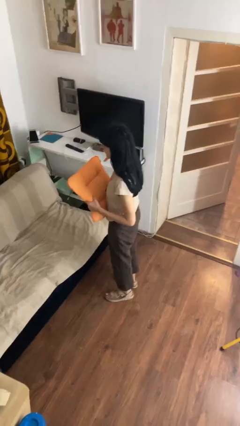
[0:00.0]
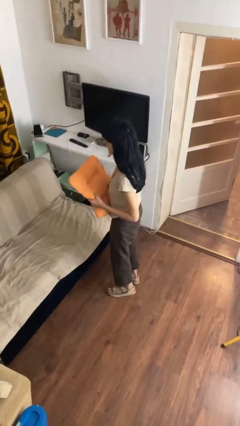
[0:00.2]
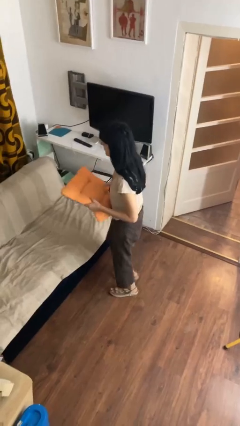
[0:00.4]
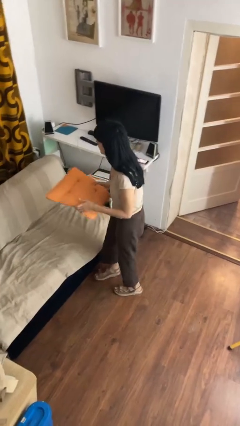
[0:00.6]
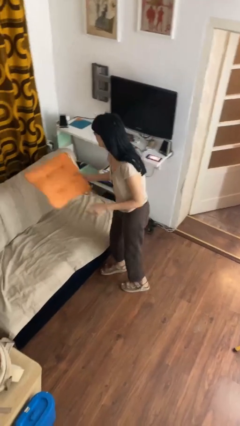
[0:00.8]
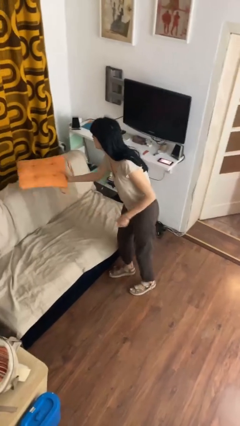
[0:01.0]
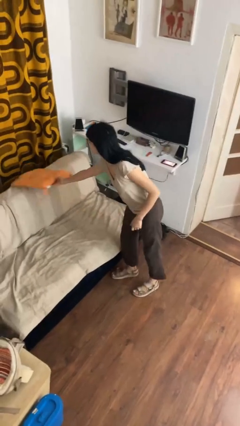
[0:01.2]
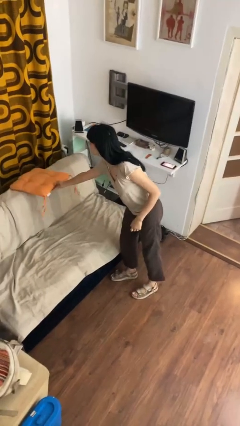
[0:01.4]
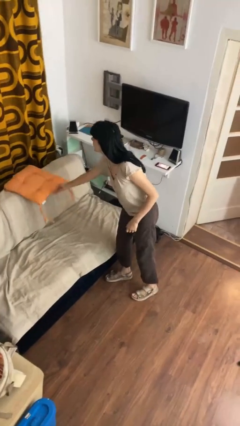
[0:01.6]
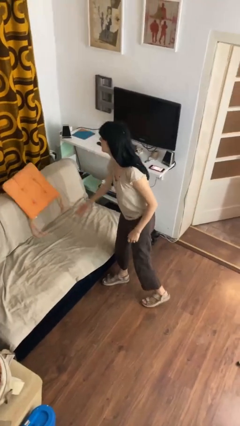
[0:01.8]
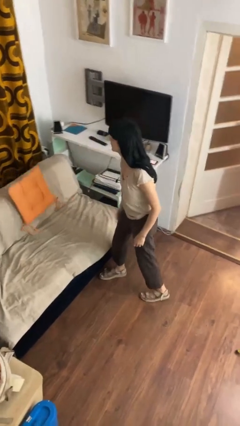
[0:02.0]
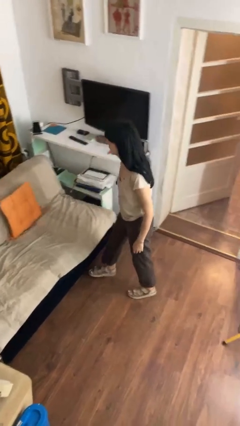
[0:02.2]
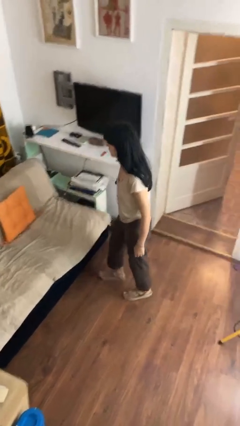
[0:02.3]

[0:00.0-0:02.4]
person puts down object on couch

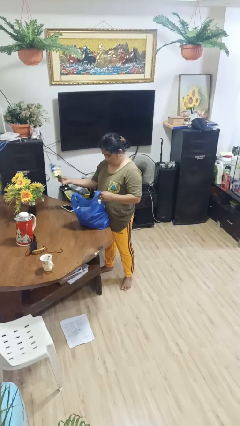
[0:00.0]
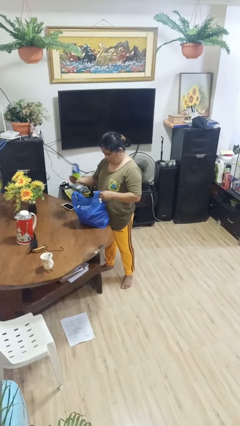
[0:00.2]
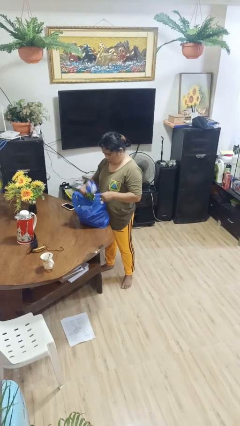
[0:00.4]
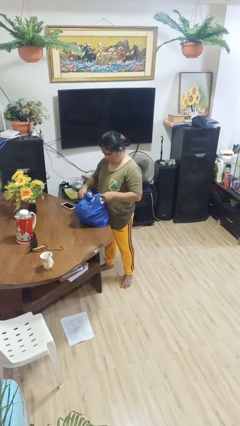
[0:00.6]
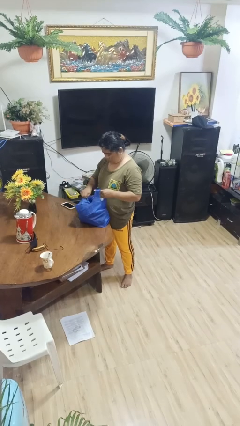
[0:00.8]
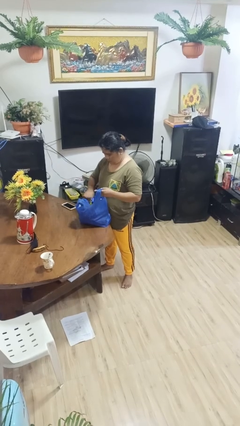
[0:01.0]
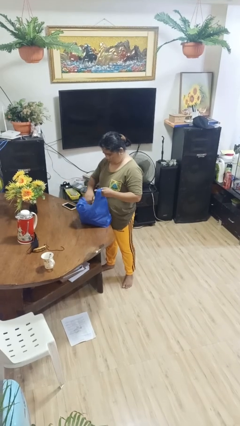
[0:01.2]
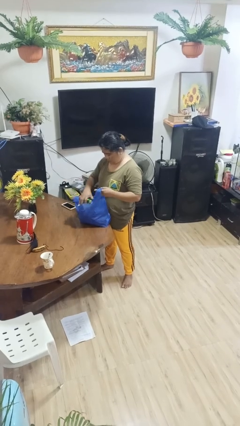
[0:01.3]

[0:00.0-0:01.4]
person puts object into bag

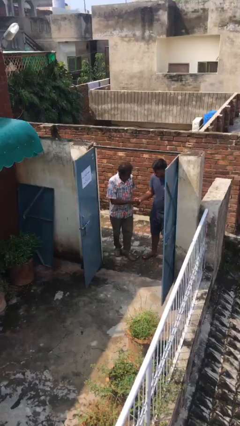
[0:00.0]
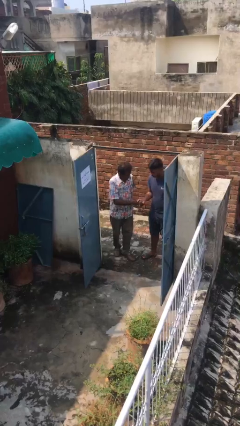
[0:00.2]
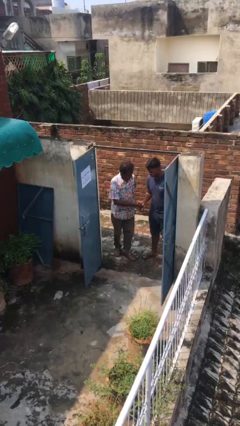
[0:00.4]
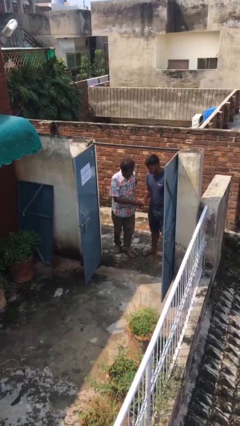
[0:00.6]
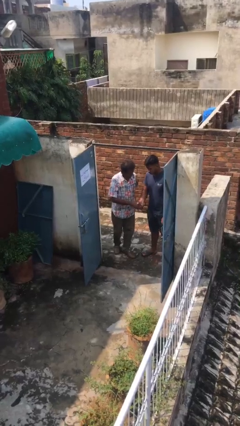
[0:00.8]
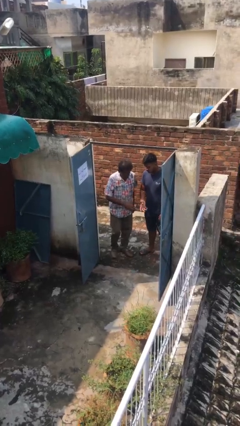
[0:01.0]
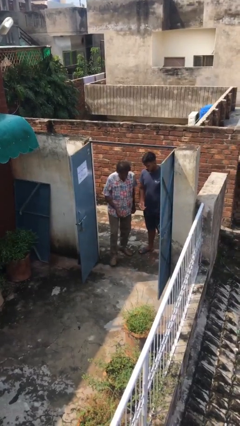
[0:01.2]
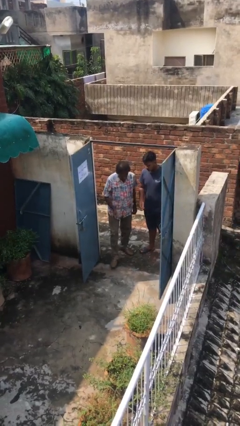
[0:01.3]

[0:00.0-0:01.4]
person shakes hand

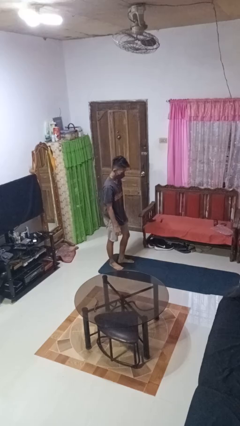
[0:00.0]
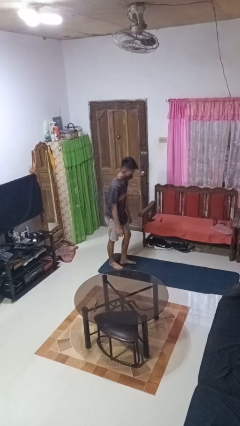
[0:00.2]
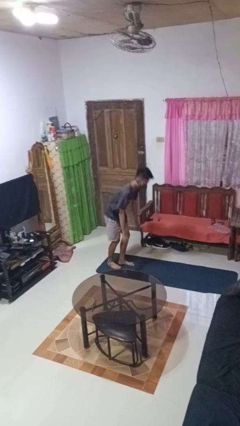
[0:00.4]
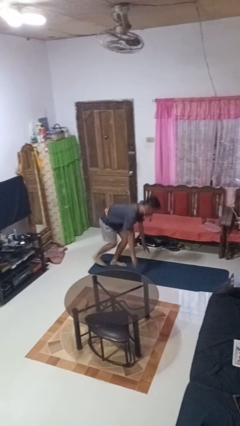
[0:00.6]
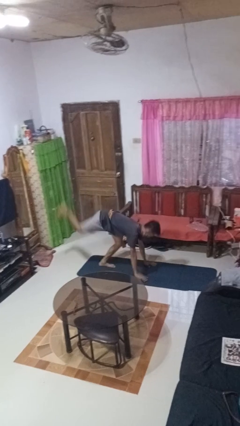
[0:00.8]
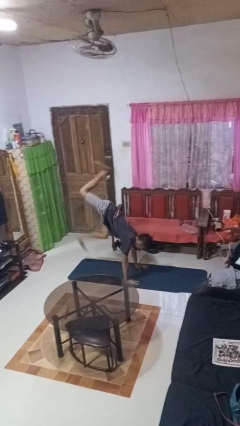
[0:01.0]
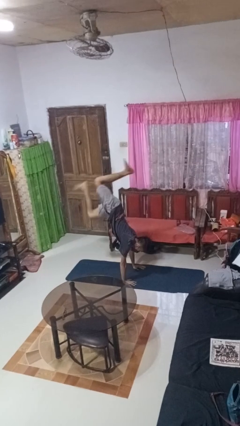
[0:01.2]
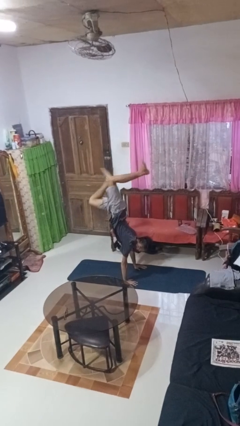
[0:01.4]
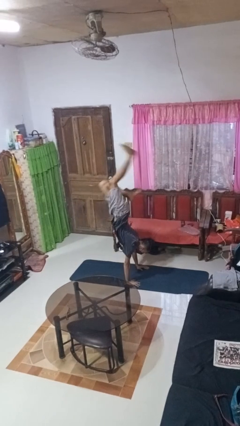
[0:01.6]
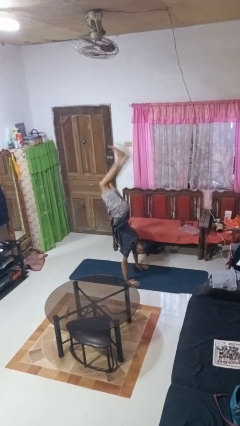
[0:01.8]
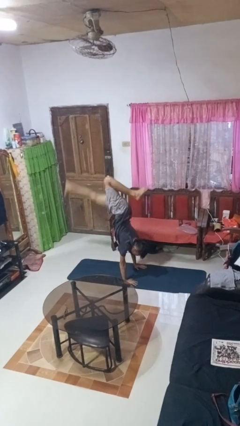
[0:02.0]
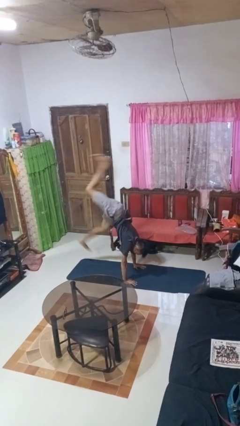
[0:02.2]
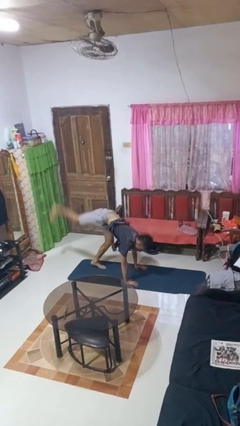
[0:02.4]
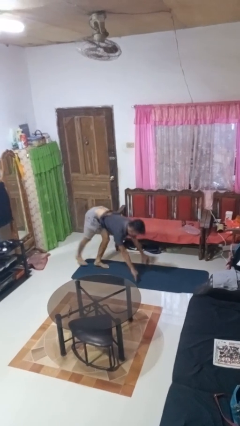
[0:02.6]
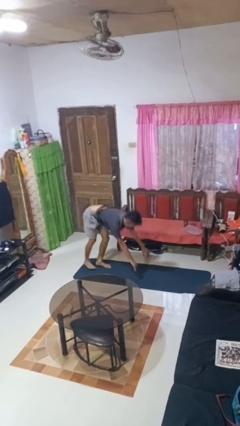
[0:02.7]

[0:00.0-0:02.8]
person handstand

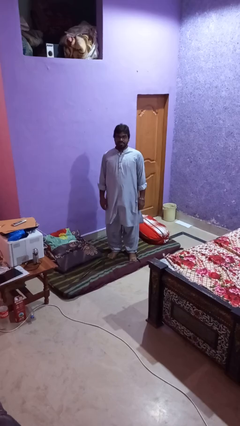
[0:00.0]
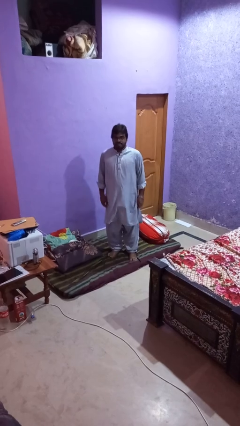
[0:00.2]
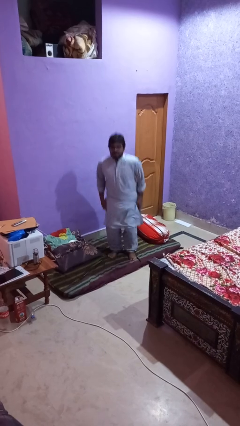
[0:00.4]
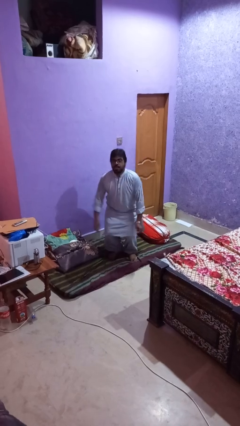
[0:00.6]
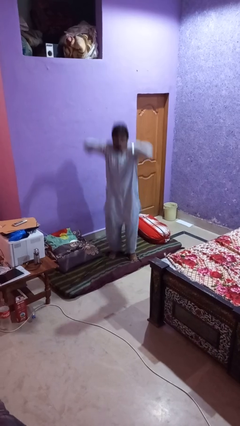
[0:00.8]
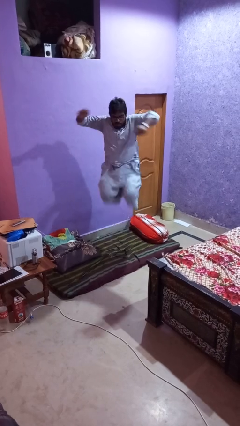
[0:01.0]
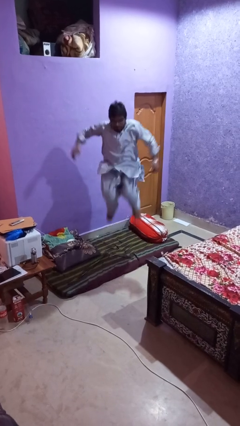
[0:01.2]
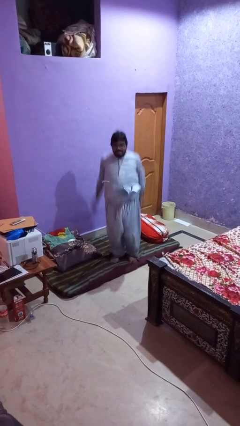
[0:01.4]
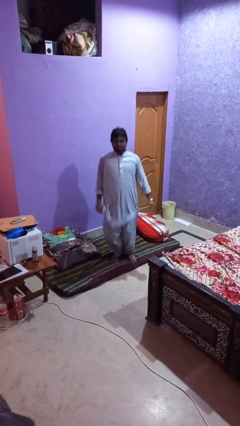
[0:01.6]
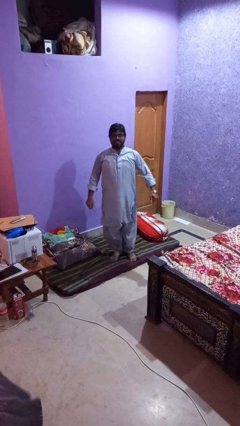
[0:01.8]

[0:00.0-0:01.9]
person jumps

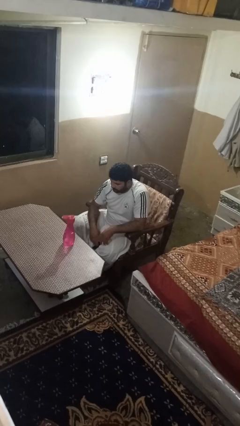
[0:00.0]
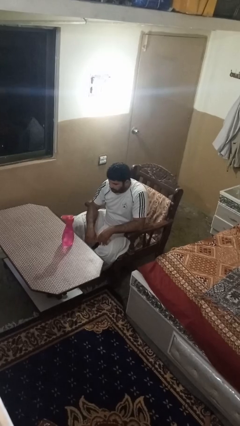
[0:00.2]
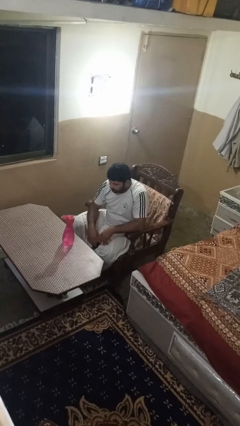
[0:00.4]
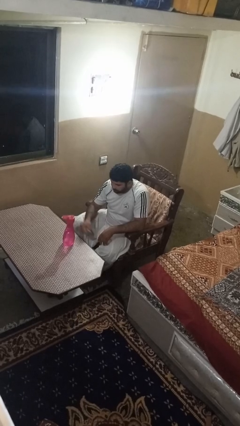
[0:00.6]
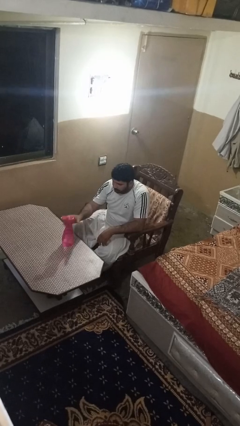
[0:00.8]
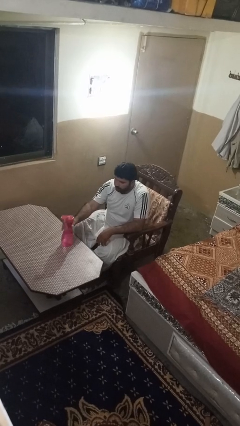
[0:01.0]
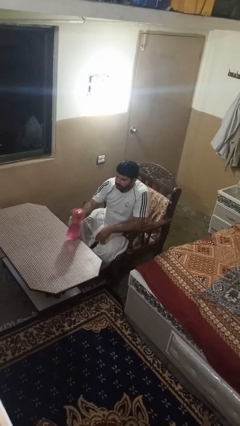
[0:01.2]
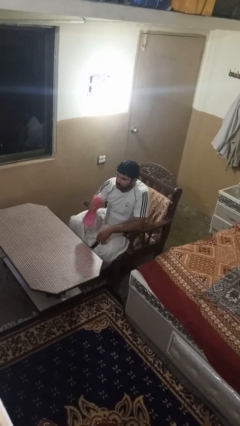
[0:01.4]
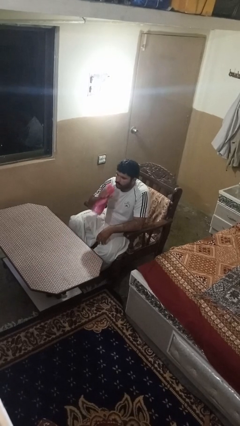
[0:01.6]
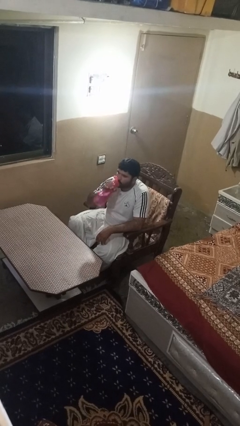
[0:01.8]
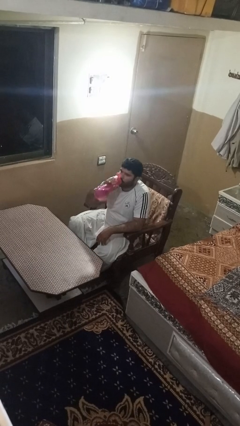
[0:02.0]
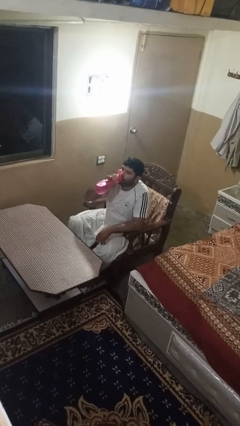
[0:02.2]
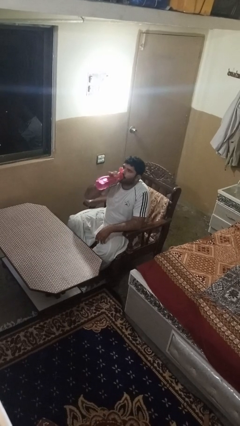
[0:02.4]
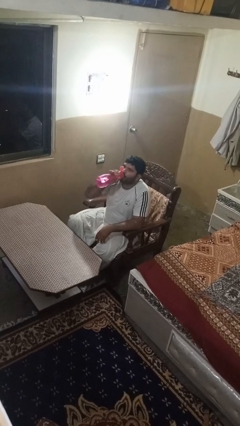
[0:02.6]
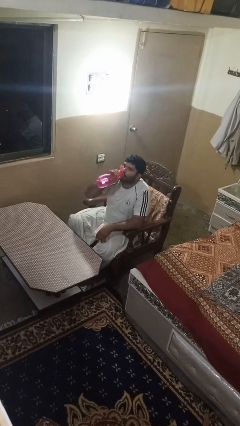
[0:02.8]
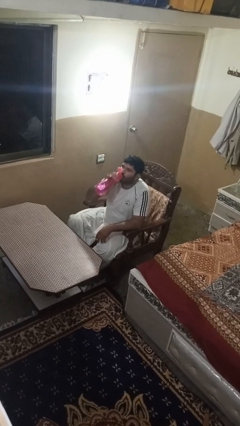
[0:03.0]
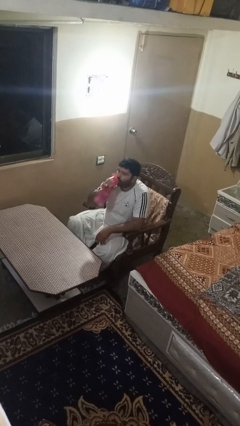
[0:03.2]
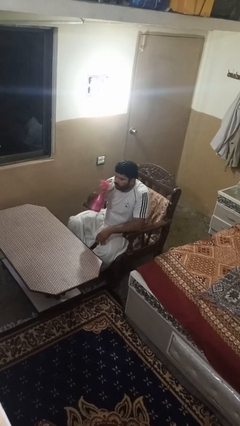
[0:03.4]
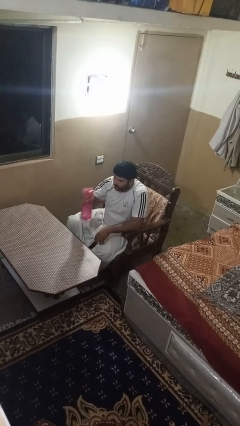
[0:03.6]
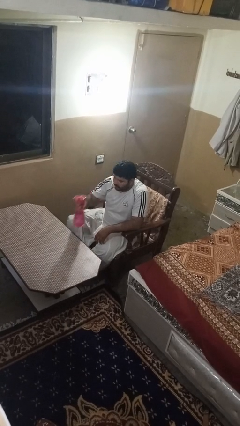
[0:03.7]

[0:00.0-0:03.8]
person drinks from bottle

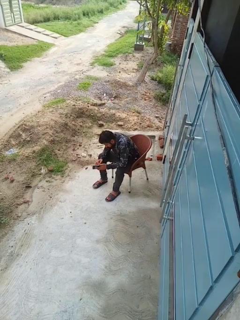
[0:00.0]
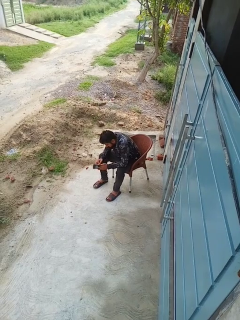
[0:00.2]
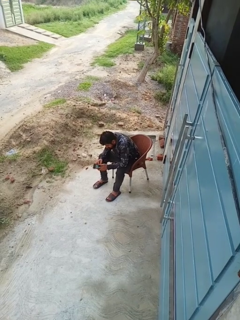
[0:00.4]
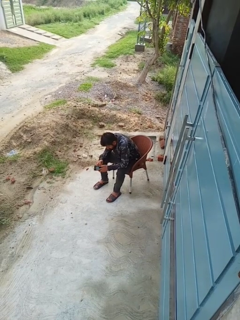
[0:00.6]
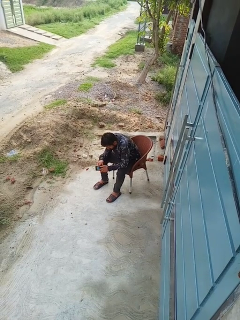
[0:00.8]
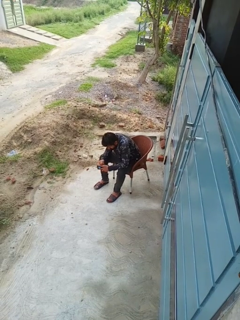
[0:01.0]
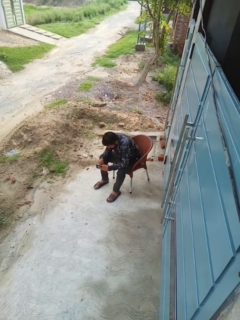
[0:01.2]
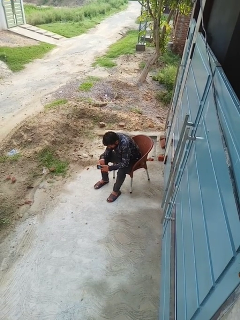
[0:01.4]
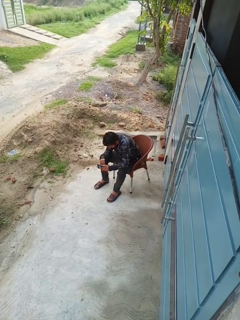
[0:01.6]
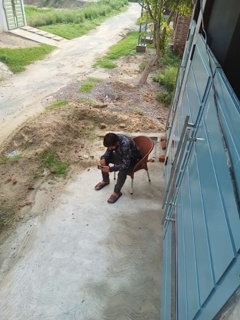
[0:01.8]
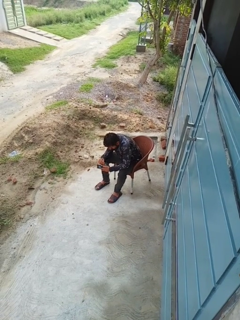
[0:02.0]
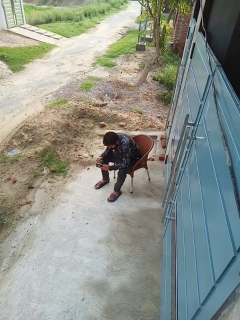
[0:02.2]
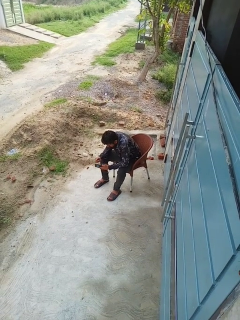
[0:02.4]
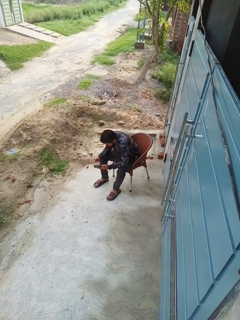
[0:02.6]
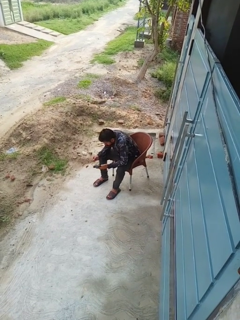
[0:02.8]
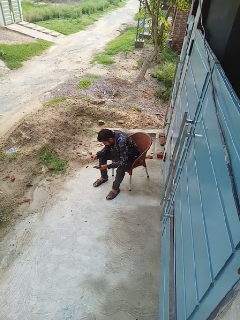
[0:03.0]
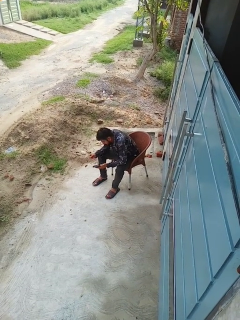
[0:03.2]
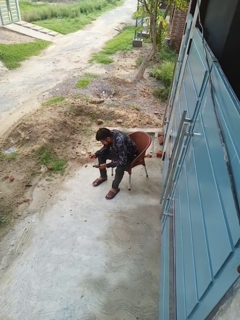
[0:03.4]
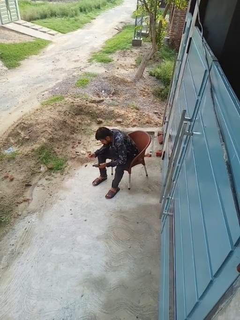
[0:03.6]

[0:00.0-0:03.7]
person takes object from purse

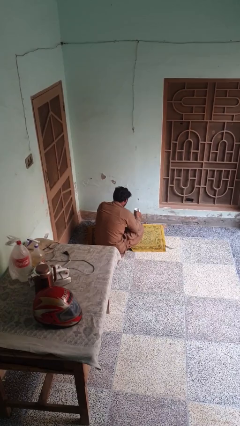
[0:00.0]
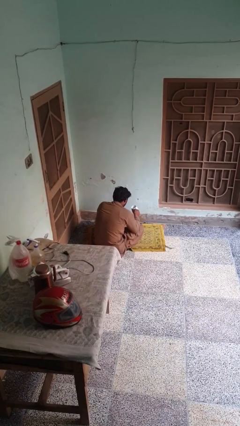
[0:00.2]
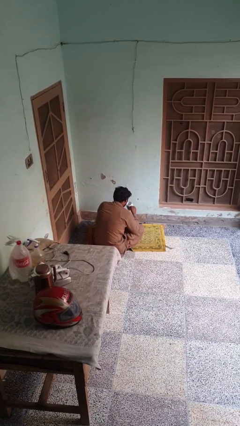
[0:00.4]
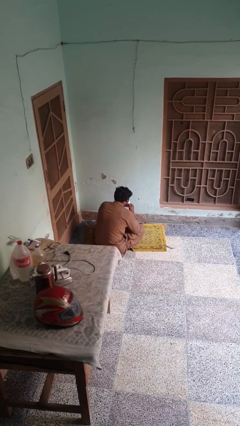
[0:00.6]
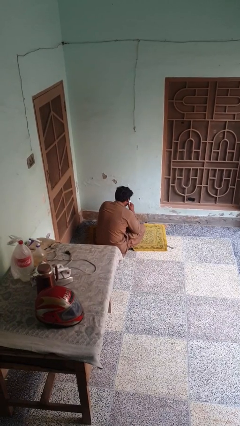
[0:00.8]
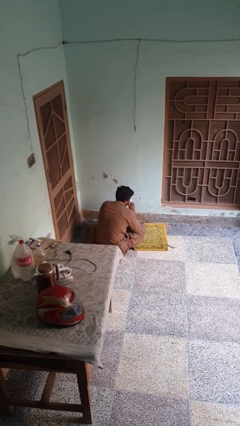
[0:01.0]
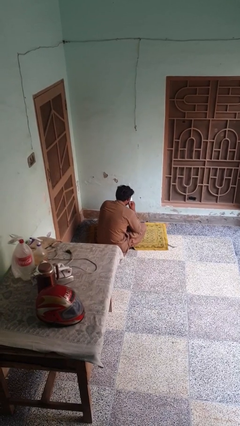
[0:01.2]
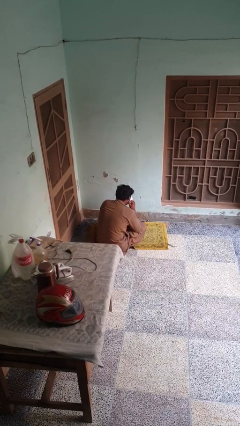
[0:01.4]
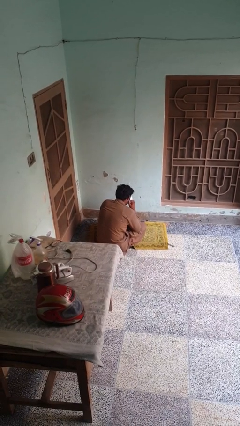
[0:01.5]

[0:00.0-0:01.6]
person drinks from mug
